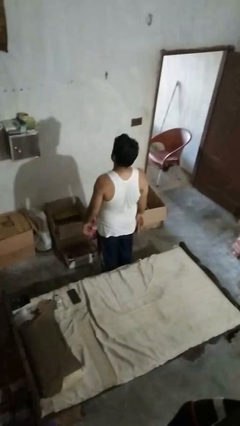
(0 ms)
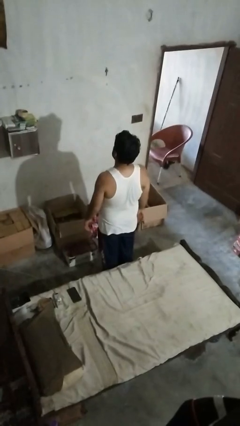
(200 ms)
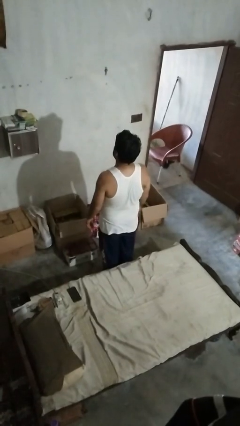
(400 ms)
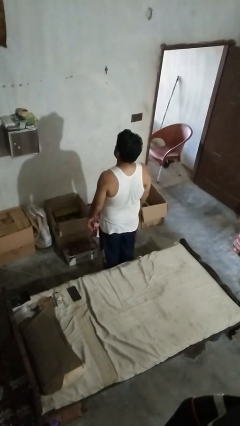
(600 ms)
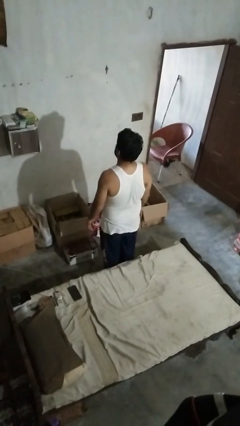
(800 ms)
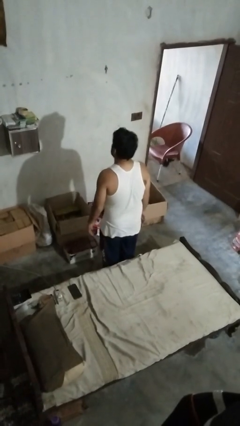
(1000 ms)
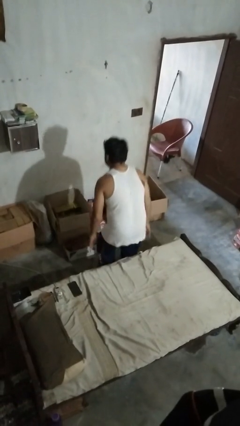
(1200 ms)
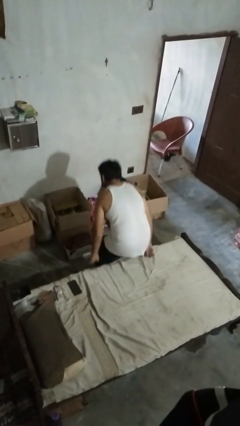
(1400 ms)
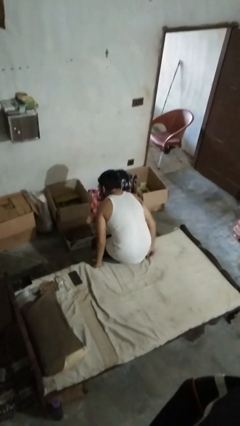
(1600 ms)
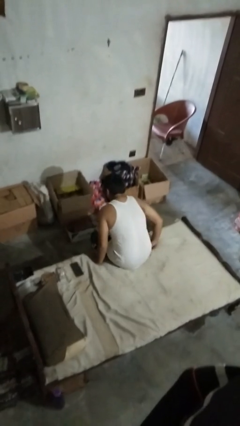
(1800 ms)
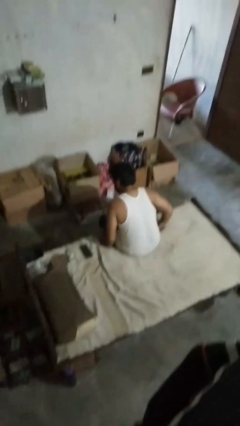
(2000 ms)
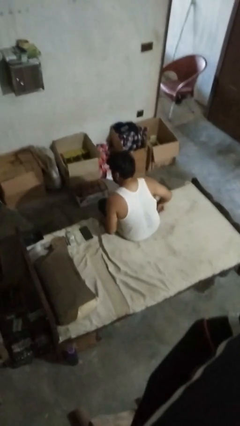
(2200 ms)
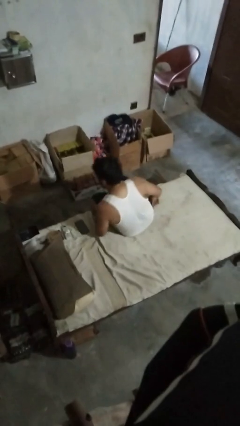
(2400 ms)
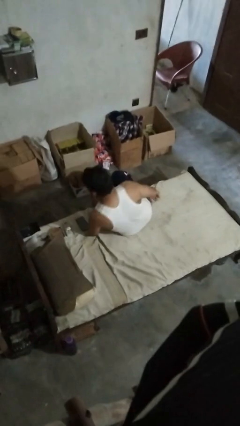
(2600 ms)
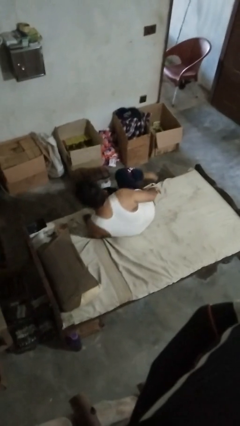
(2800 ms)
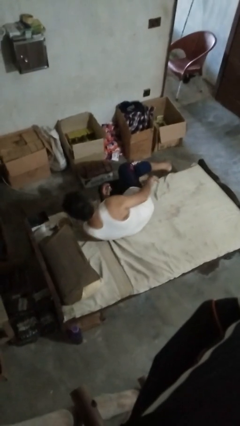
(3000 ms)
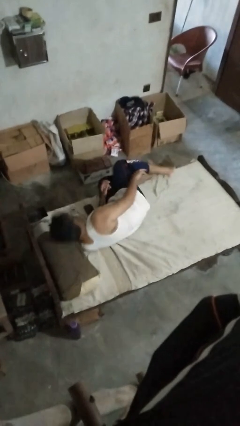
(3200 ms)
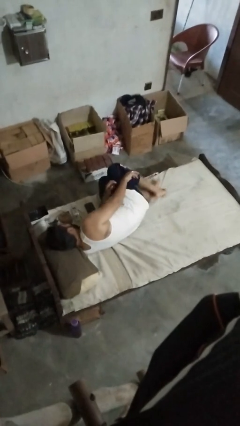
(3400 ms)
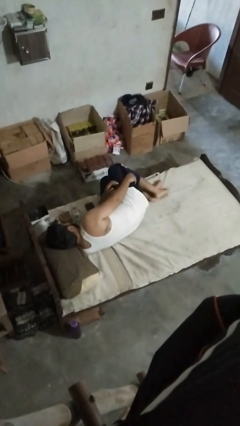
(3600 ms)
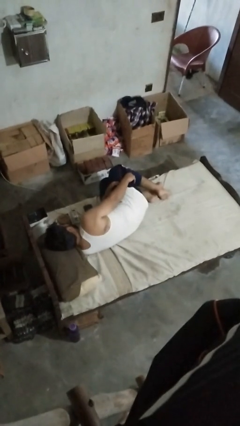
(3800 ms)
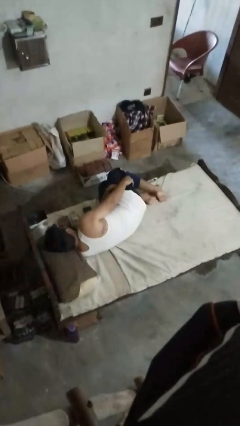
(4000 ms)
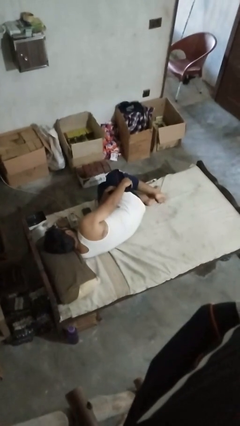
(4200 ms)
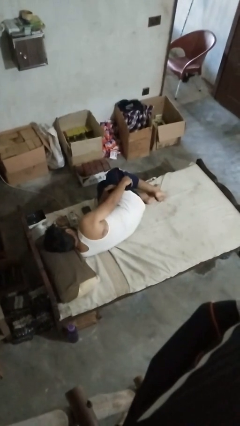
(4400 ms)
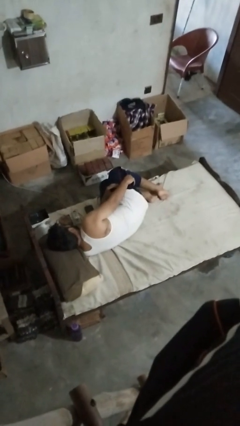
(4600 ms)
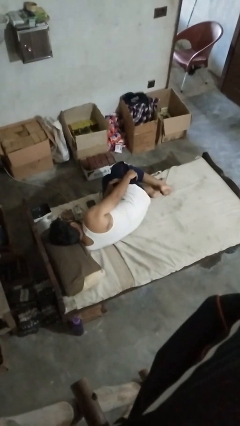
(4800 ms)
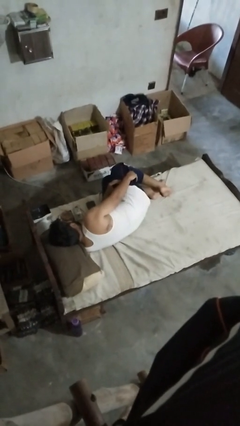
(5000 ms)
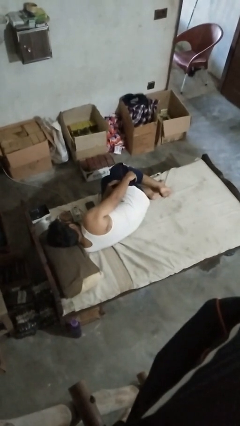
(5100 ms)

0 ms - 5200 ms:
person lies down on bed

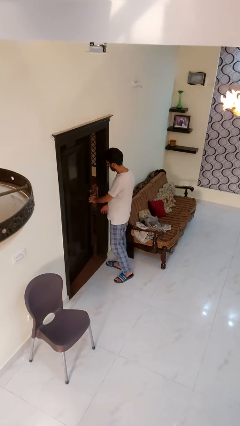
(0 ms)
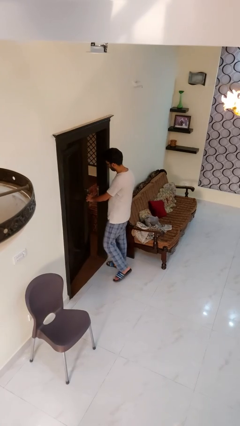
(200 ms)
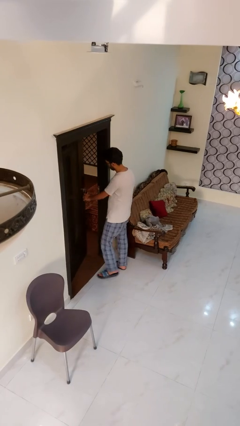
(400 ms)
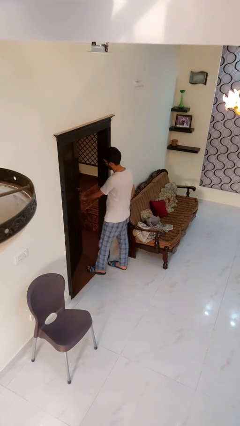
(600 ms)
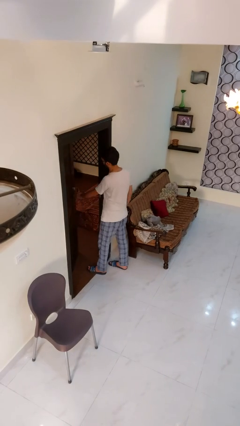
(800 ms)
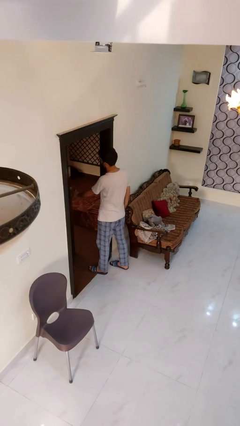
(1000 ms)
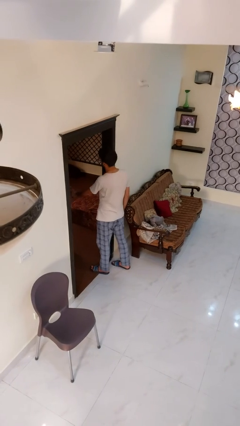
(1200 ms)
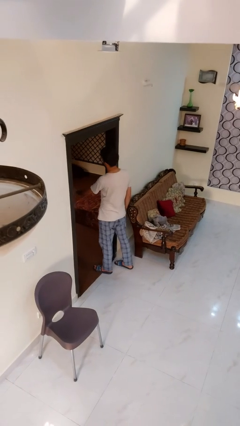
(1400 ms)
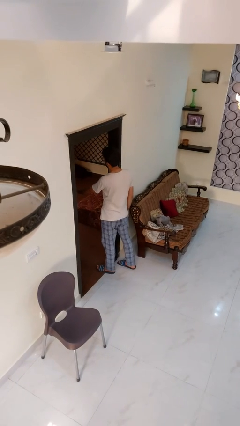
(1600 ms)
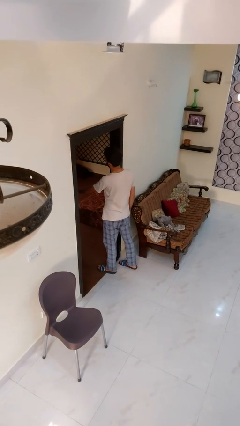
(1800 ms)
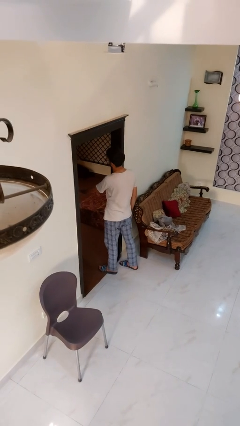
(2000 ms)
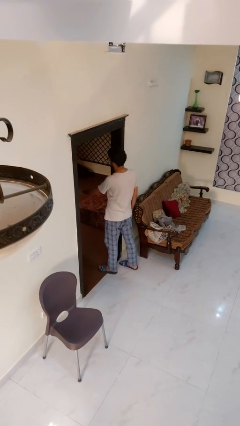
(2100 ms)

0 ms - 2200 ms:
person opens facility door

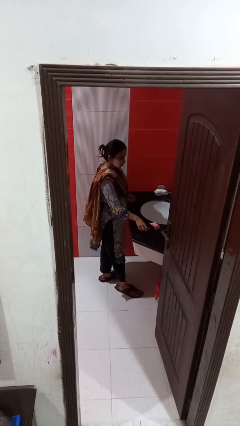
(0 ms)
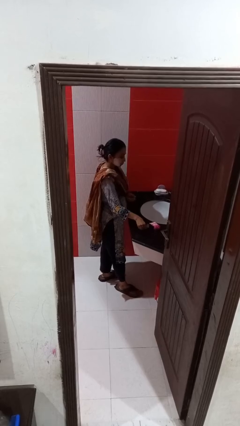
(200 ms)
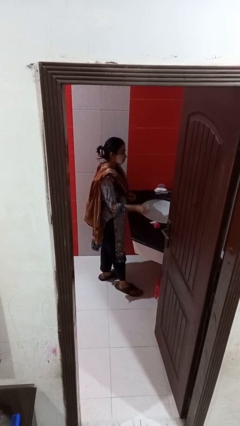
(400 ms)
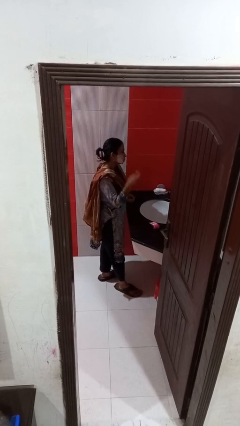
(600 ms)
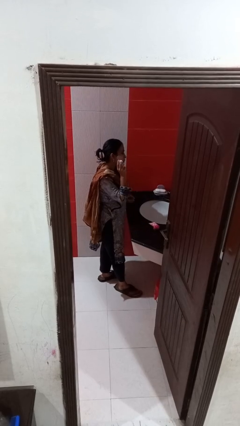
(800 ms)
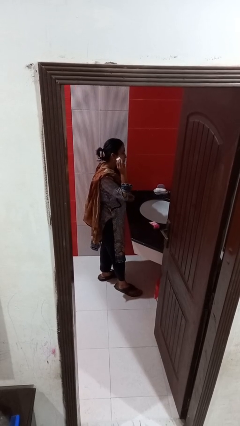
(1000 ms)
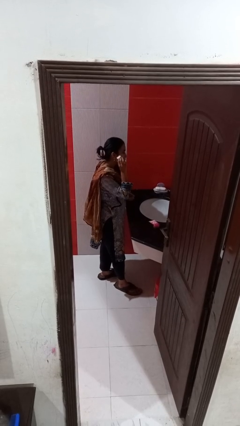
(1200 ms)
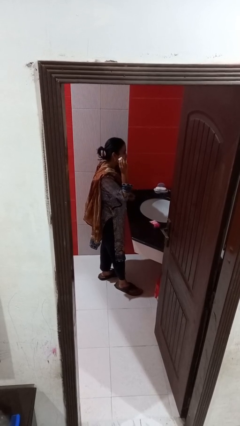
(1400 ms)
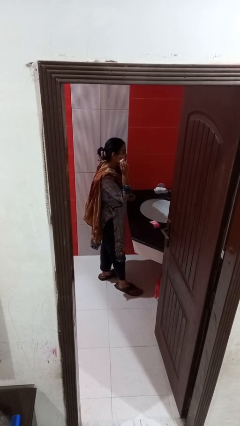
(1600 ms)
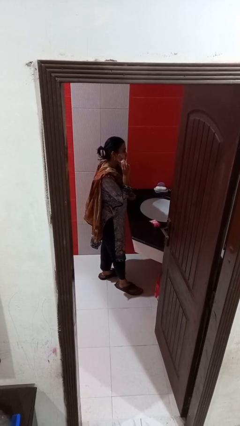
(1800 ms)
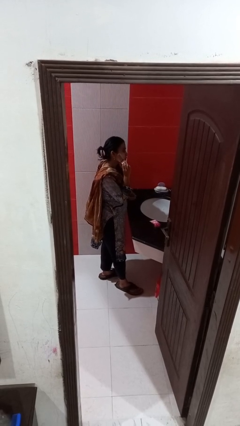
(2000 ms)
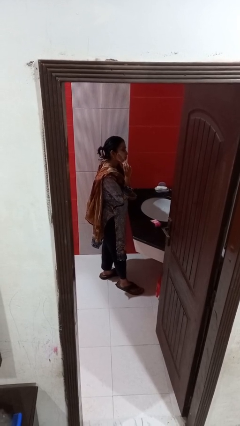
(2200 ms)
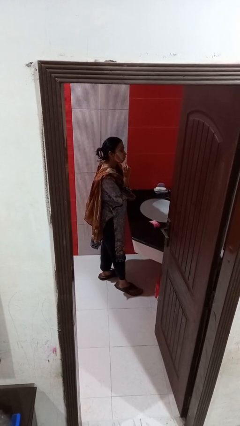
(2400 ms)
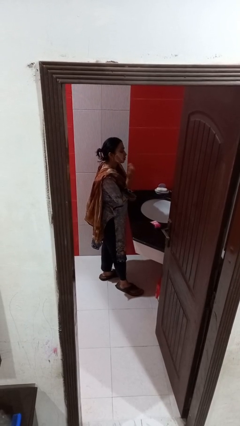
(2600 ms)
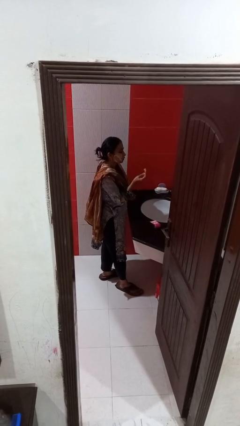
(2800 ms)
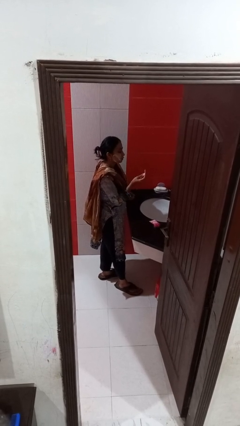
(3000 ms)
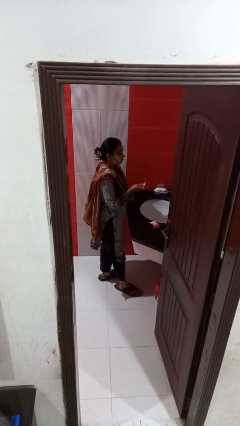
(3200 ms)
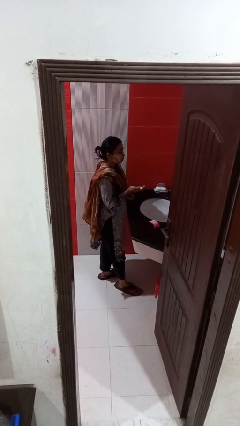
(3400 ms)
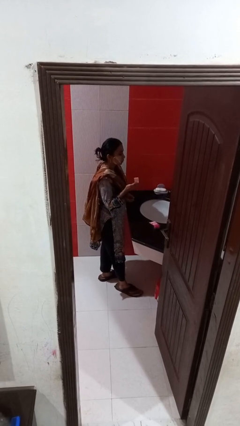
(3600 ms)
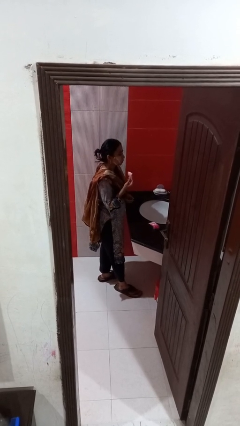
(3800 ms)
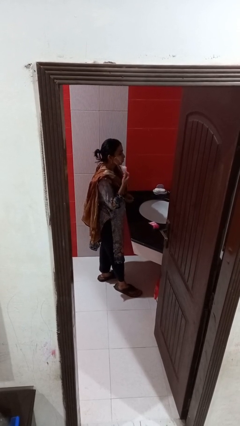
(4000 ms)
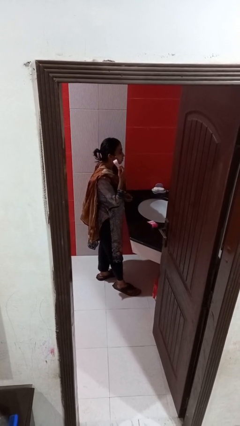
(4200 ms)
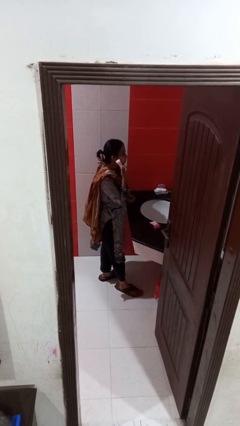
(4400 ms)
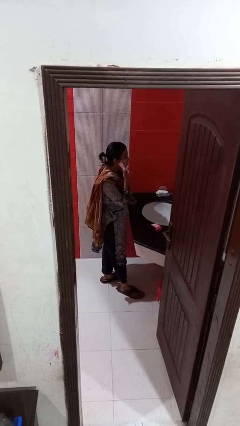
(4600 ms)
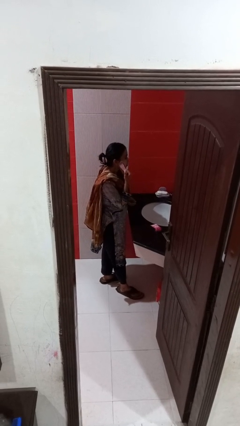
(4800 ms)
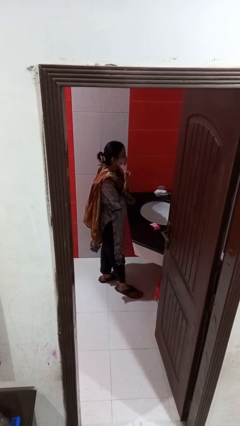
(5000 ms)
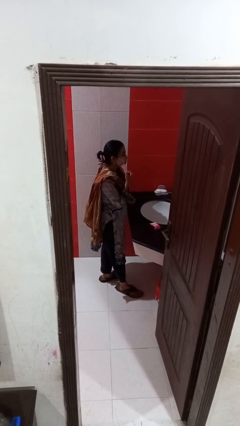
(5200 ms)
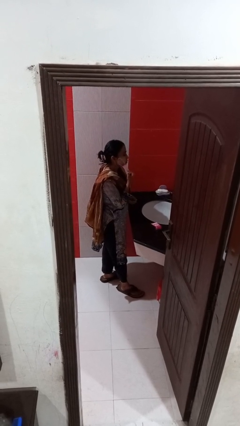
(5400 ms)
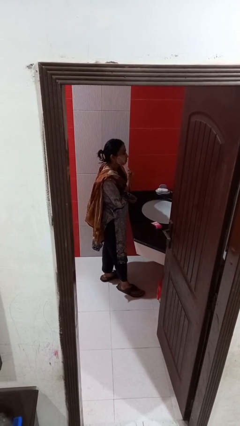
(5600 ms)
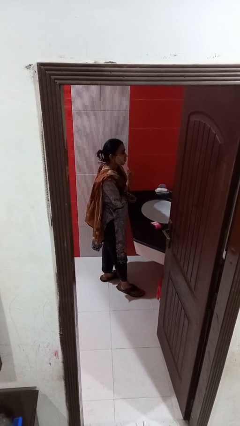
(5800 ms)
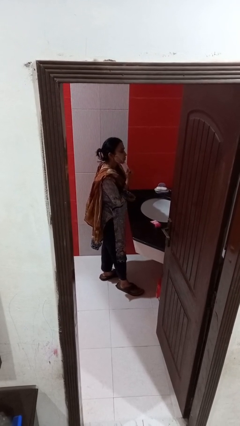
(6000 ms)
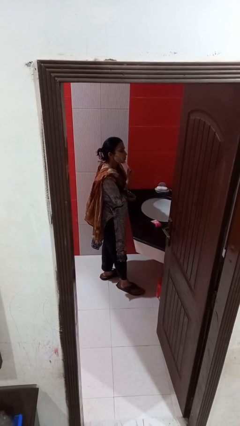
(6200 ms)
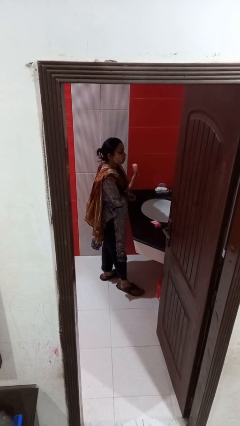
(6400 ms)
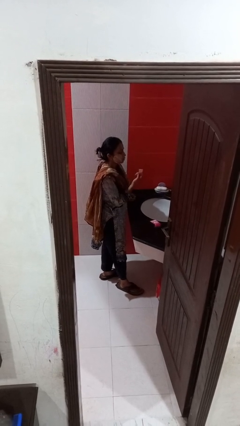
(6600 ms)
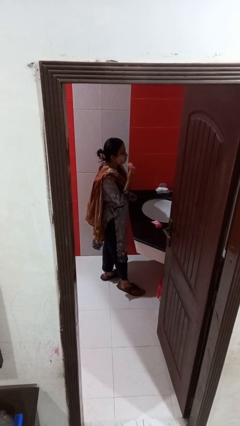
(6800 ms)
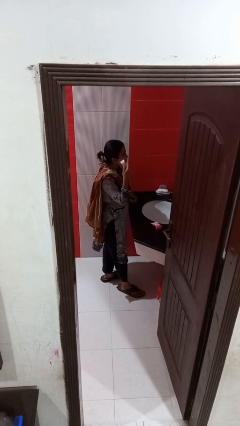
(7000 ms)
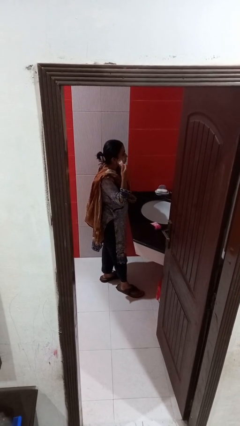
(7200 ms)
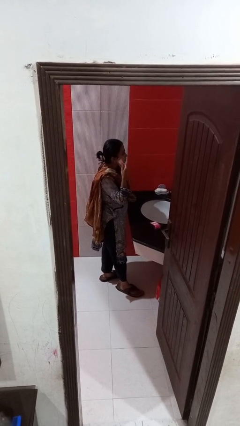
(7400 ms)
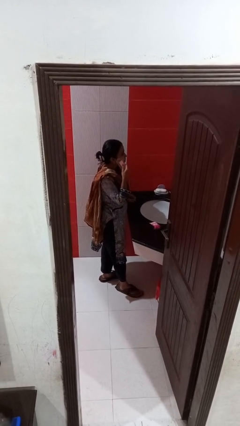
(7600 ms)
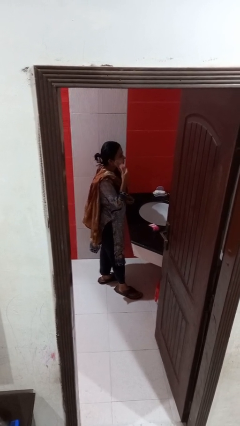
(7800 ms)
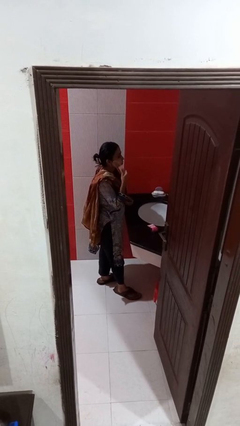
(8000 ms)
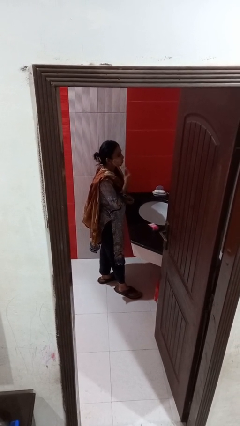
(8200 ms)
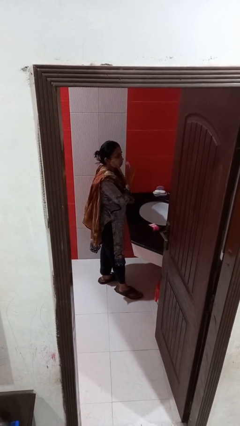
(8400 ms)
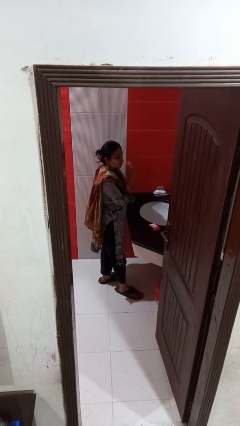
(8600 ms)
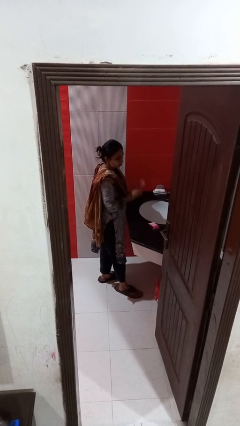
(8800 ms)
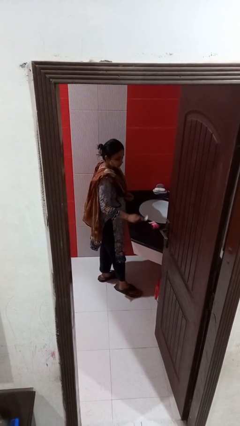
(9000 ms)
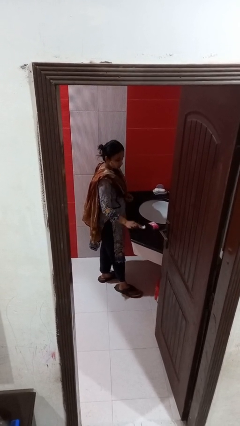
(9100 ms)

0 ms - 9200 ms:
person shaves face

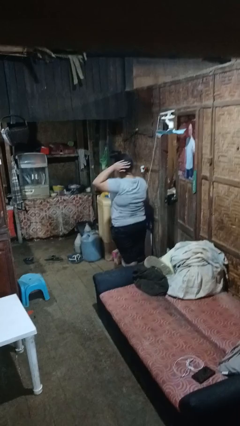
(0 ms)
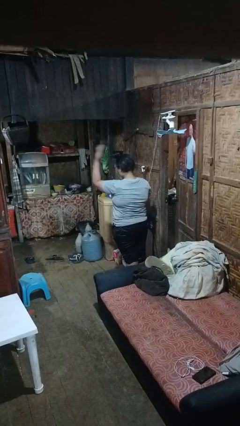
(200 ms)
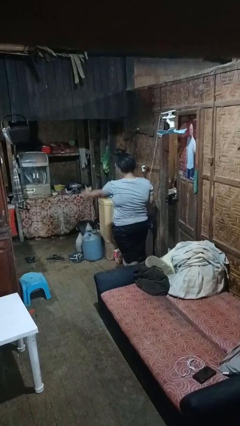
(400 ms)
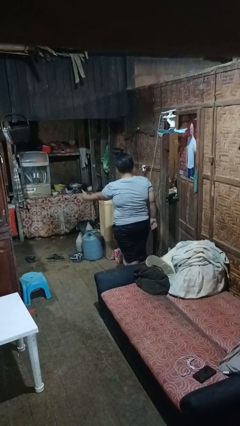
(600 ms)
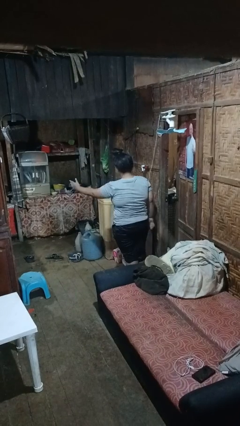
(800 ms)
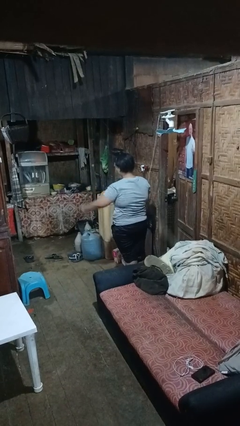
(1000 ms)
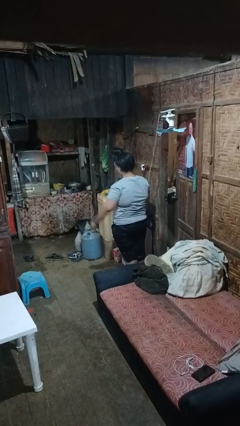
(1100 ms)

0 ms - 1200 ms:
person karate chop

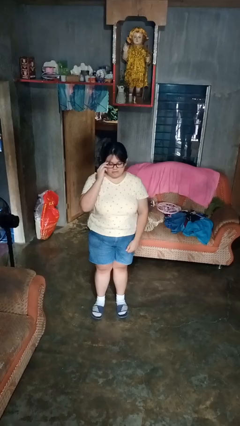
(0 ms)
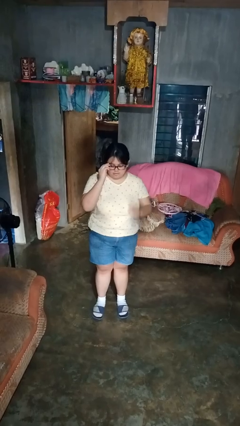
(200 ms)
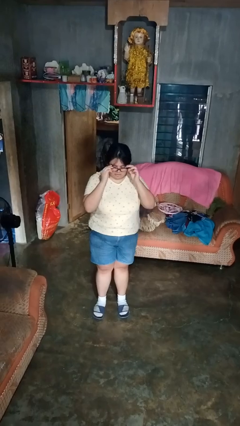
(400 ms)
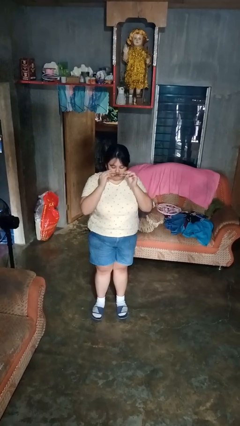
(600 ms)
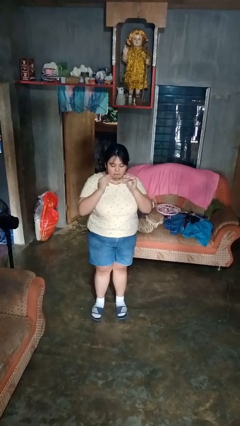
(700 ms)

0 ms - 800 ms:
person takes off glasses
